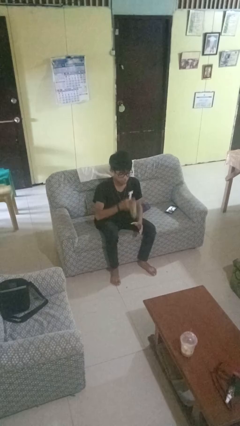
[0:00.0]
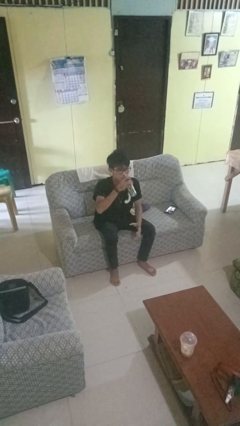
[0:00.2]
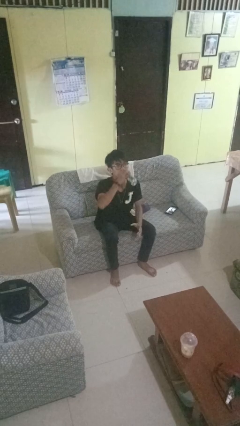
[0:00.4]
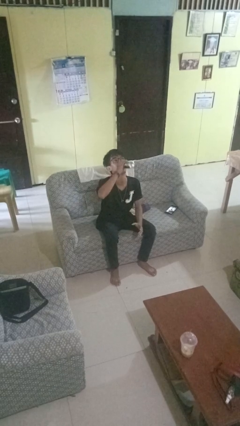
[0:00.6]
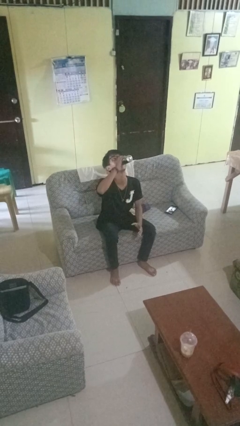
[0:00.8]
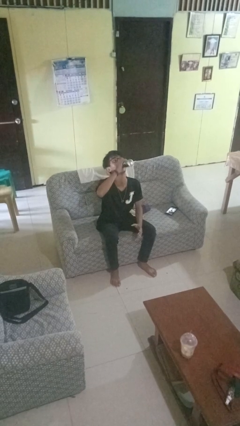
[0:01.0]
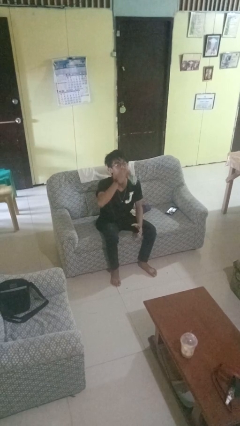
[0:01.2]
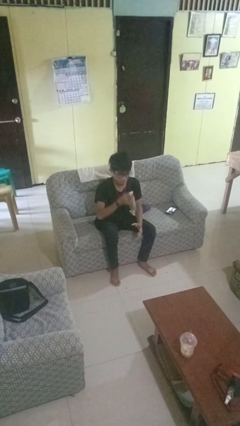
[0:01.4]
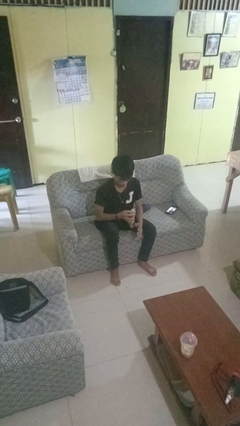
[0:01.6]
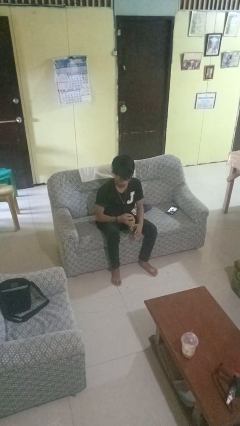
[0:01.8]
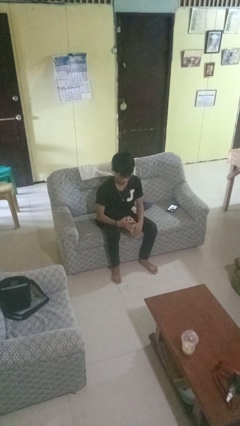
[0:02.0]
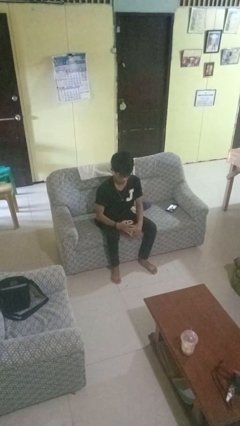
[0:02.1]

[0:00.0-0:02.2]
person drinks from beverage can

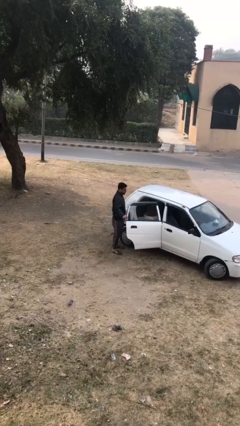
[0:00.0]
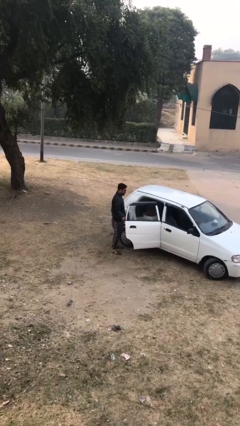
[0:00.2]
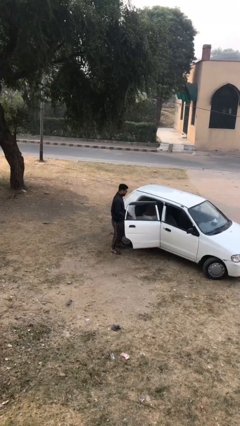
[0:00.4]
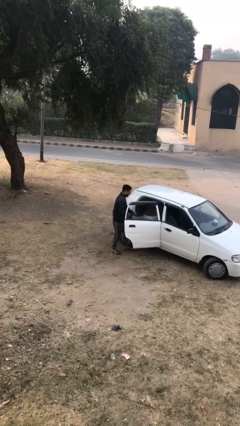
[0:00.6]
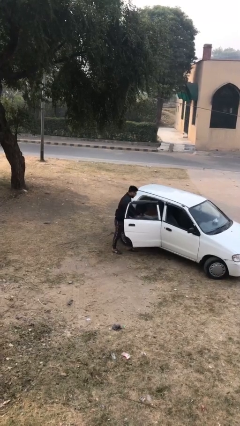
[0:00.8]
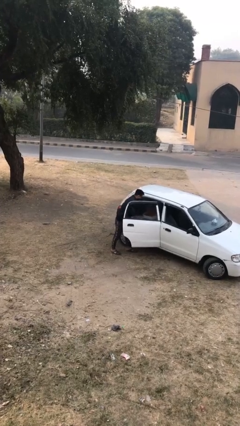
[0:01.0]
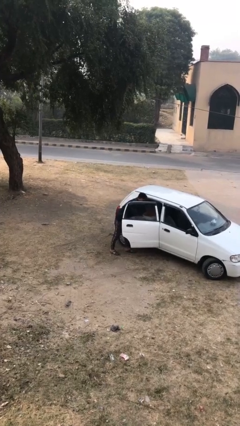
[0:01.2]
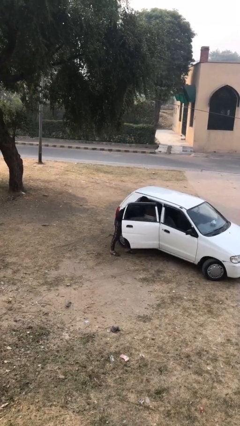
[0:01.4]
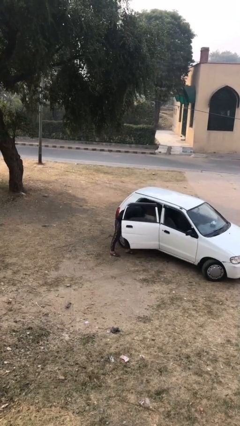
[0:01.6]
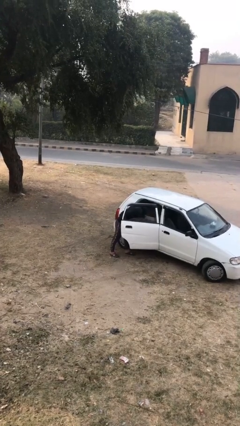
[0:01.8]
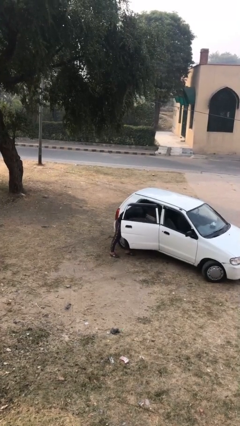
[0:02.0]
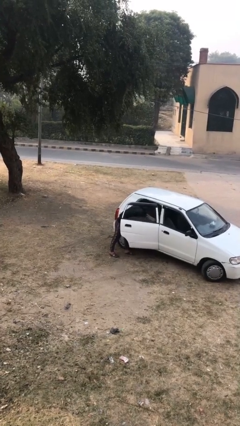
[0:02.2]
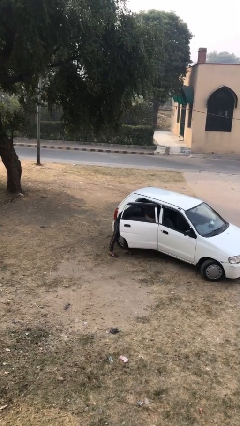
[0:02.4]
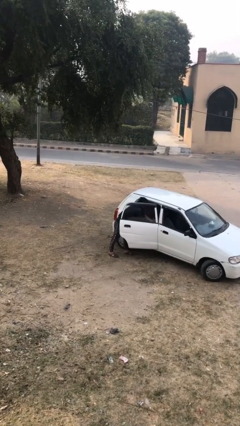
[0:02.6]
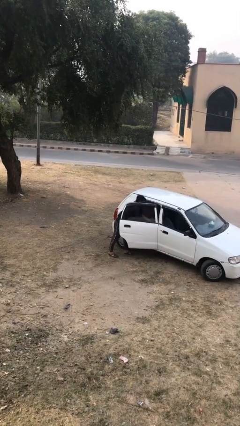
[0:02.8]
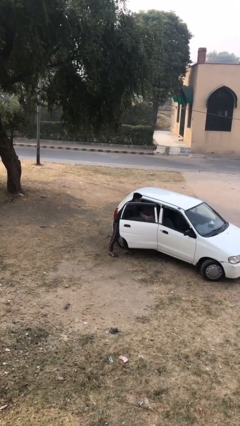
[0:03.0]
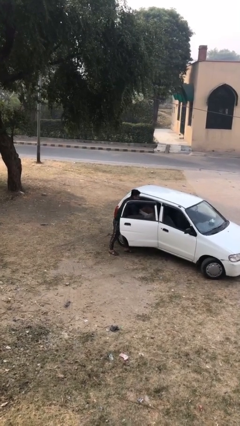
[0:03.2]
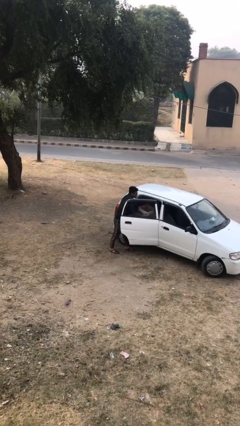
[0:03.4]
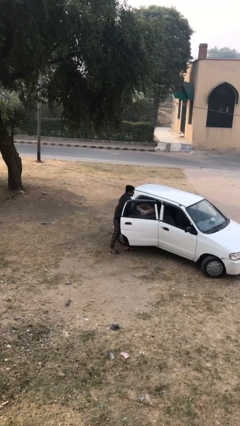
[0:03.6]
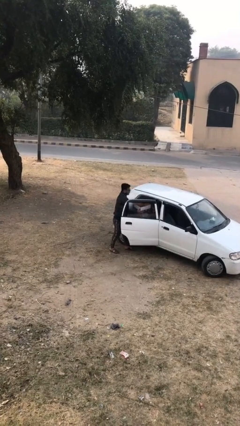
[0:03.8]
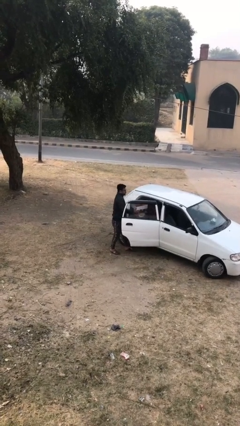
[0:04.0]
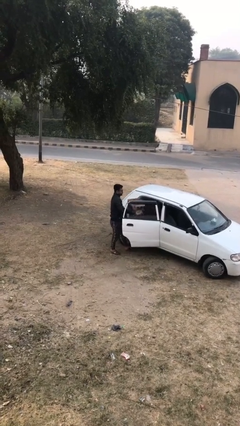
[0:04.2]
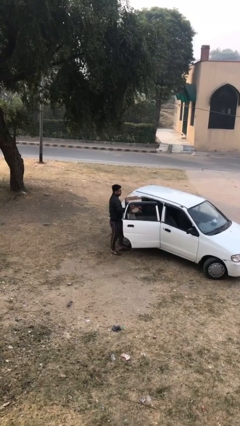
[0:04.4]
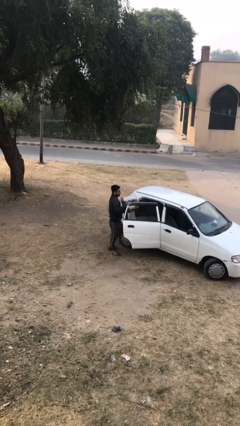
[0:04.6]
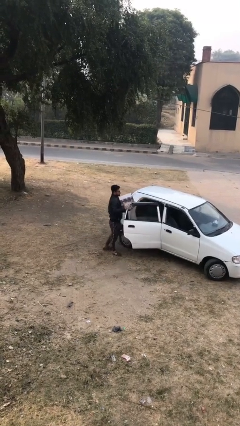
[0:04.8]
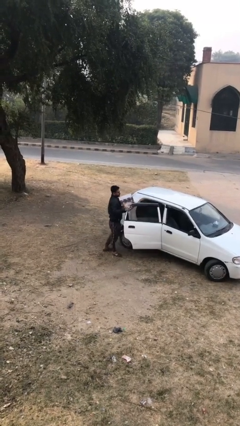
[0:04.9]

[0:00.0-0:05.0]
person unloads car

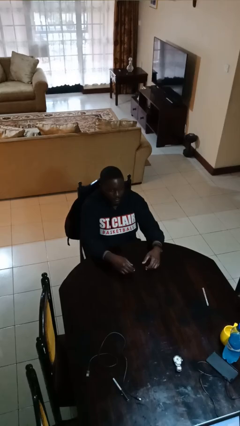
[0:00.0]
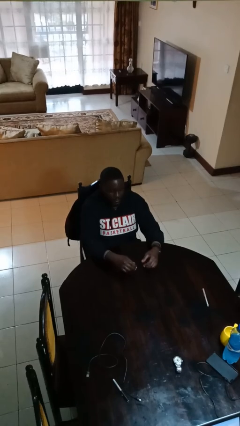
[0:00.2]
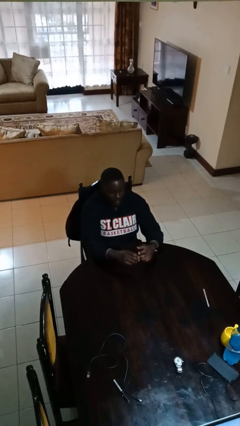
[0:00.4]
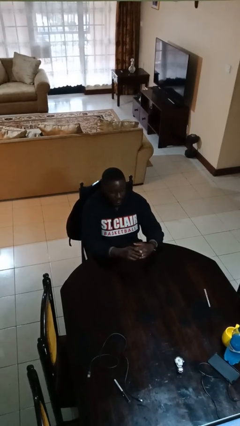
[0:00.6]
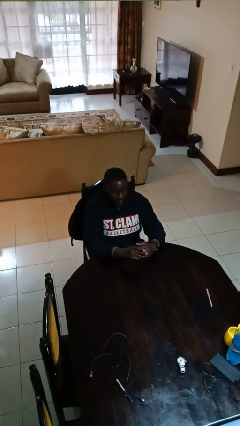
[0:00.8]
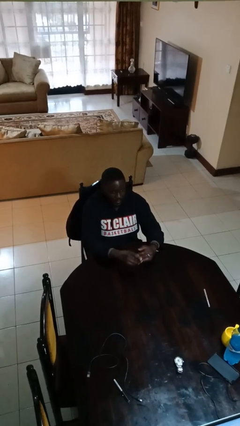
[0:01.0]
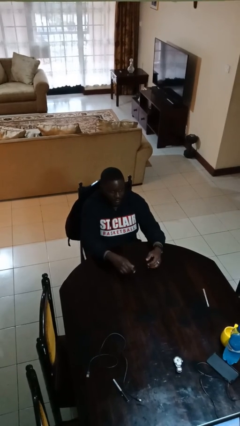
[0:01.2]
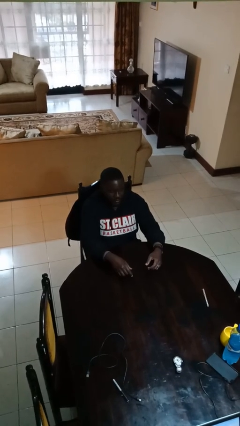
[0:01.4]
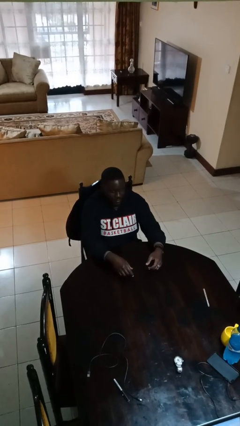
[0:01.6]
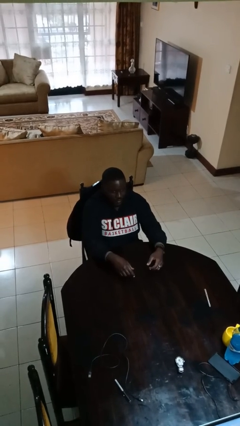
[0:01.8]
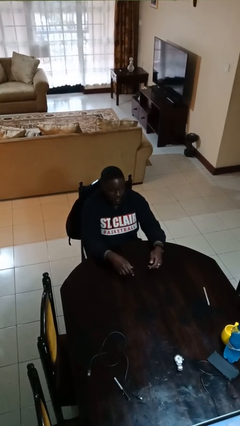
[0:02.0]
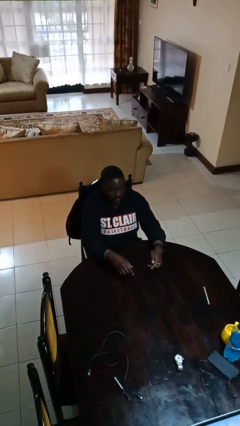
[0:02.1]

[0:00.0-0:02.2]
person puts on ring

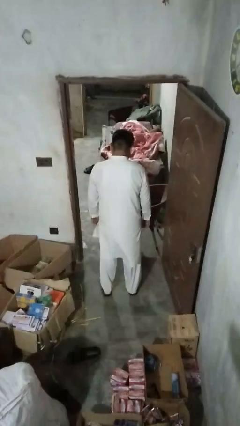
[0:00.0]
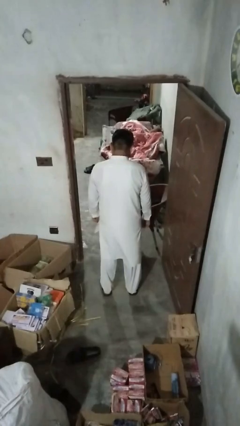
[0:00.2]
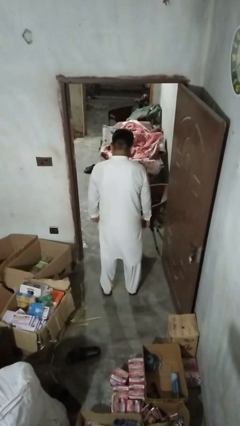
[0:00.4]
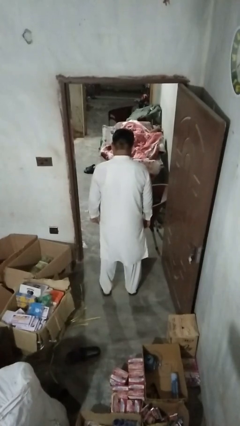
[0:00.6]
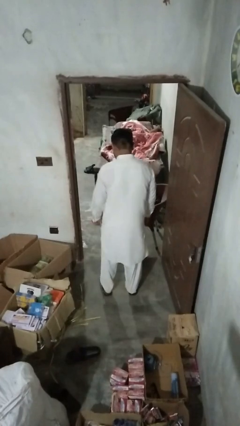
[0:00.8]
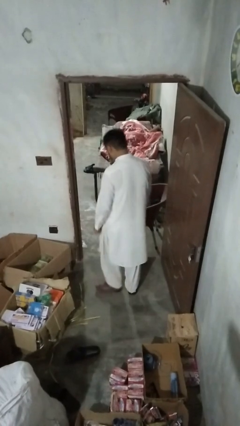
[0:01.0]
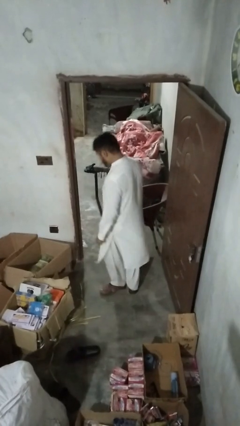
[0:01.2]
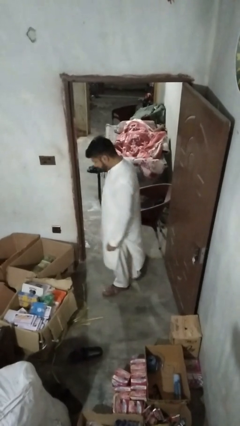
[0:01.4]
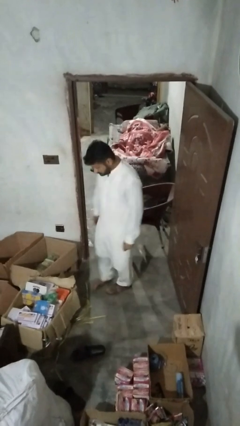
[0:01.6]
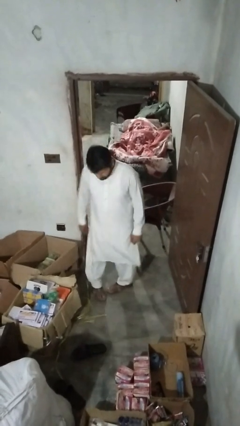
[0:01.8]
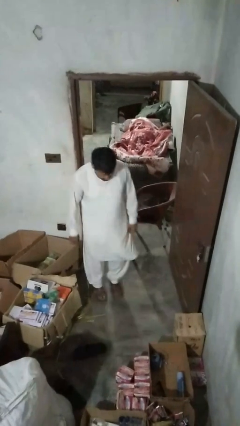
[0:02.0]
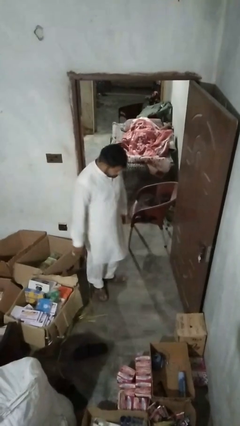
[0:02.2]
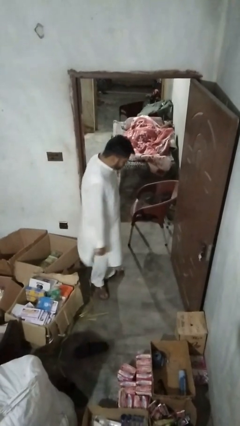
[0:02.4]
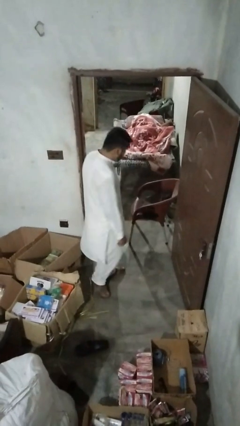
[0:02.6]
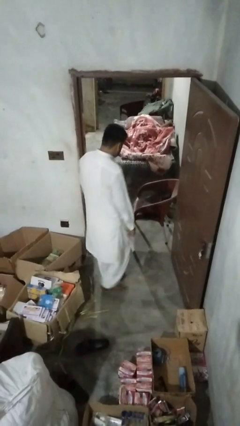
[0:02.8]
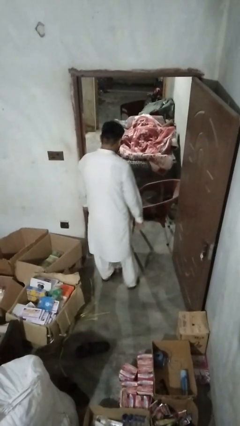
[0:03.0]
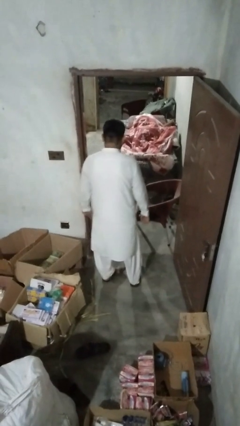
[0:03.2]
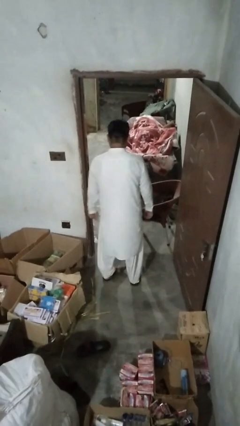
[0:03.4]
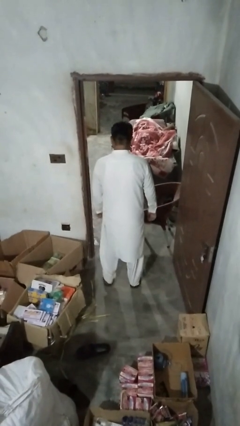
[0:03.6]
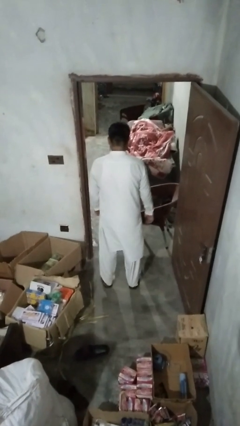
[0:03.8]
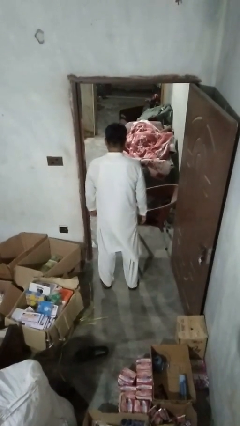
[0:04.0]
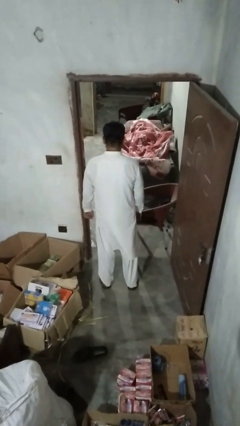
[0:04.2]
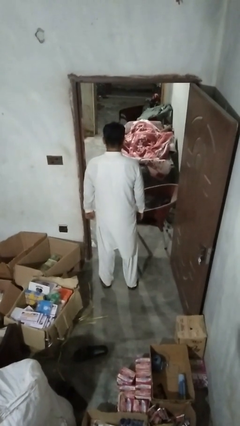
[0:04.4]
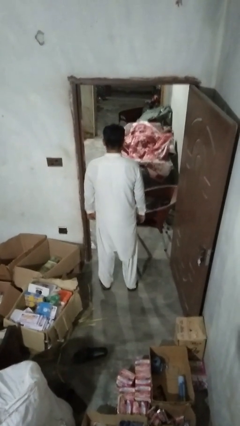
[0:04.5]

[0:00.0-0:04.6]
person twirls

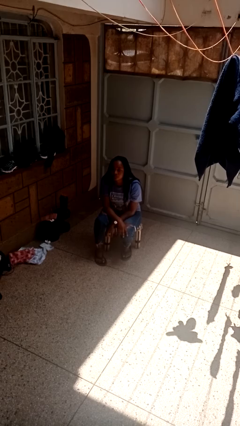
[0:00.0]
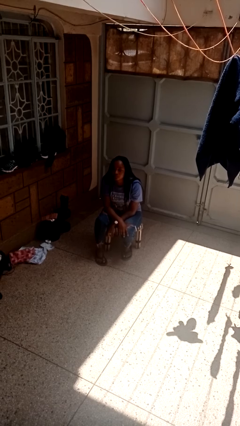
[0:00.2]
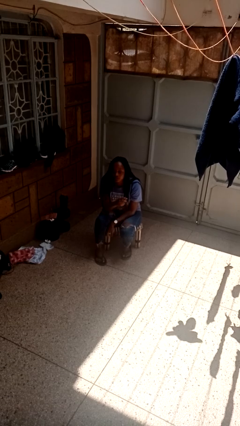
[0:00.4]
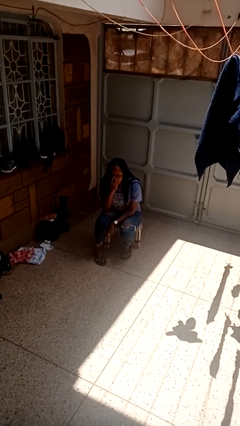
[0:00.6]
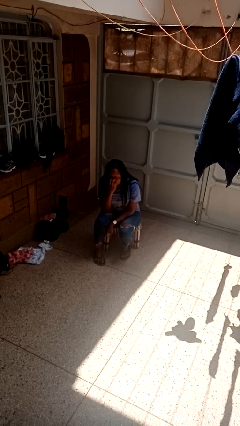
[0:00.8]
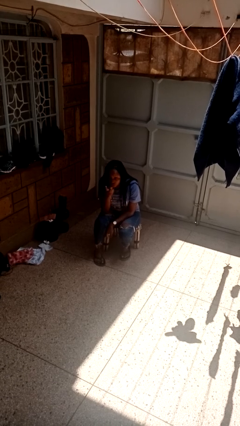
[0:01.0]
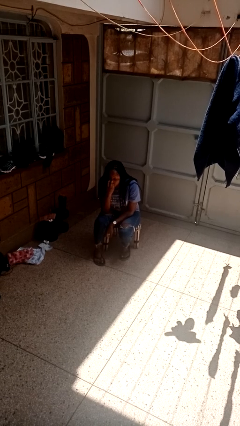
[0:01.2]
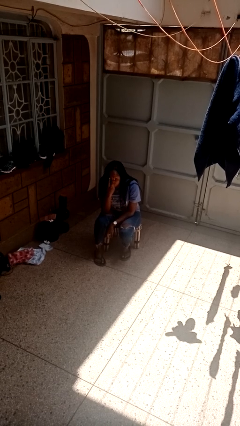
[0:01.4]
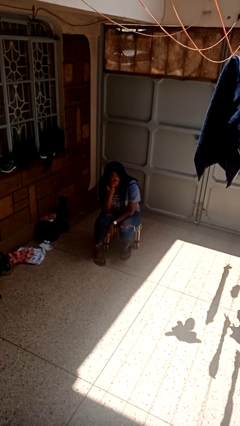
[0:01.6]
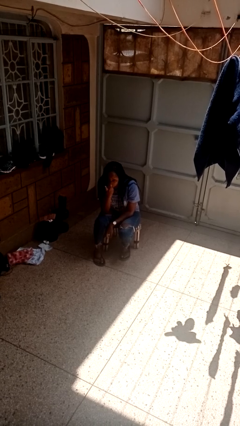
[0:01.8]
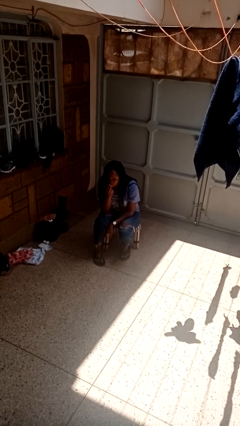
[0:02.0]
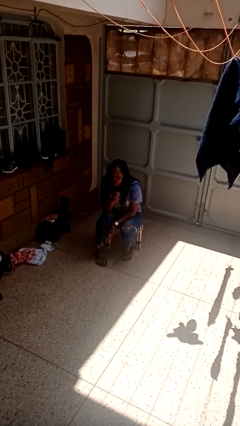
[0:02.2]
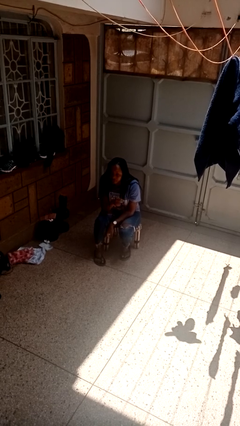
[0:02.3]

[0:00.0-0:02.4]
person gestures watch closely

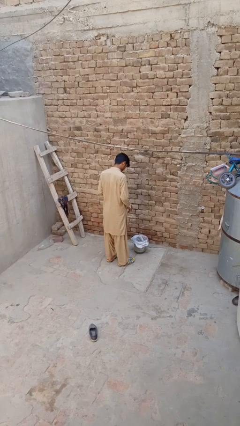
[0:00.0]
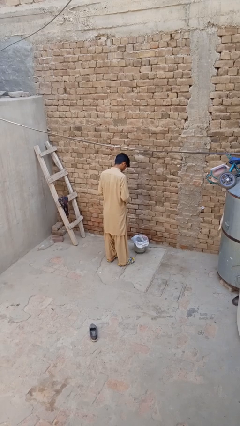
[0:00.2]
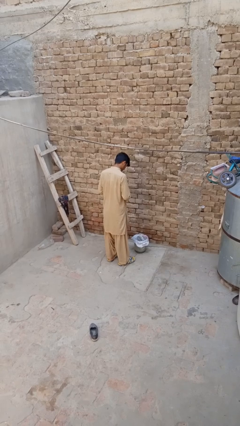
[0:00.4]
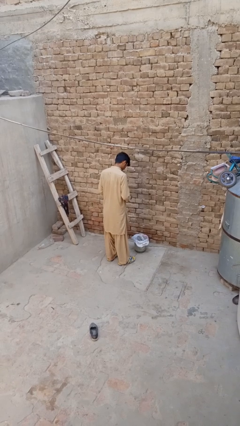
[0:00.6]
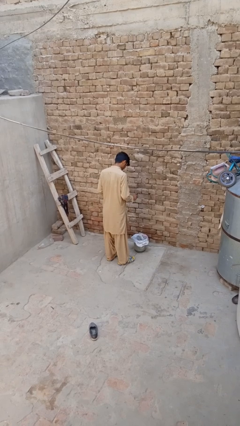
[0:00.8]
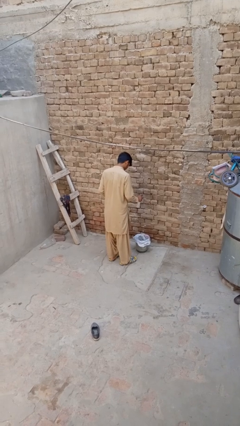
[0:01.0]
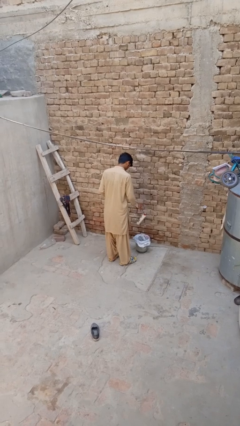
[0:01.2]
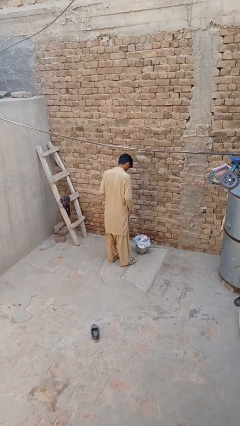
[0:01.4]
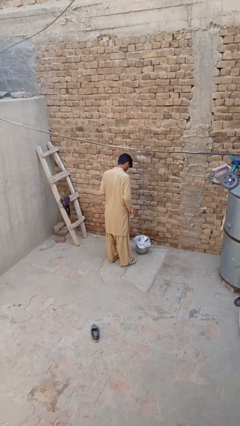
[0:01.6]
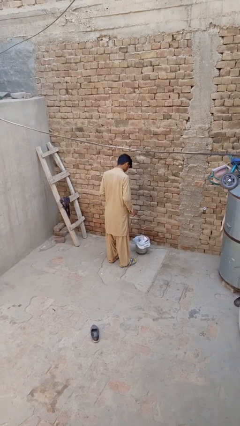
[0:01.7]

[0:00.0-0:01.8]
person discards trash
